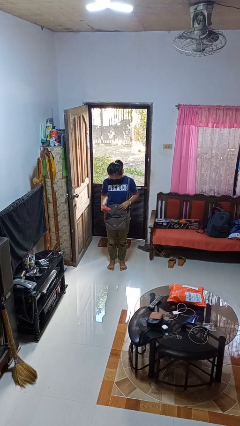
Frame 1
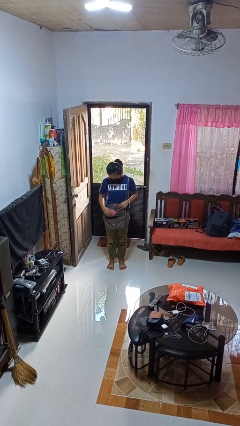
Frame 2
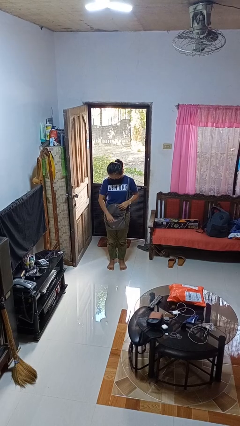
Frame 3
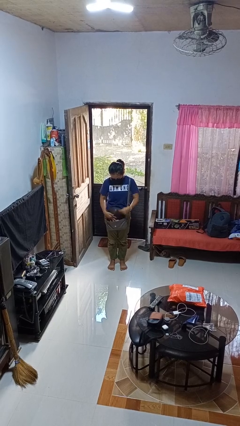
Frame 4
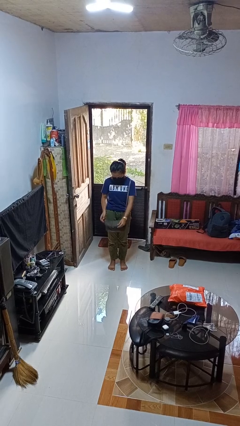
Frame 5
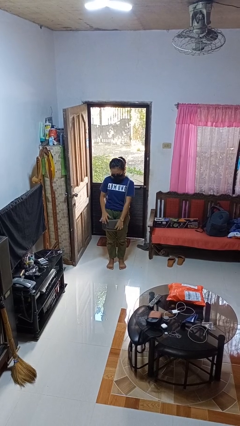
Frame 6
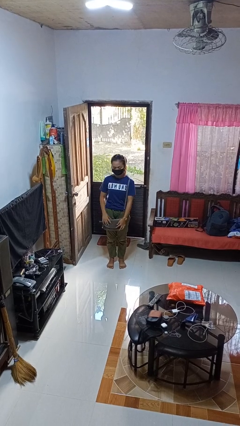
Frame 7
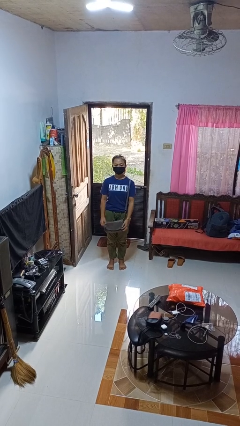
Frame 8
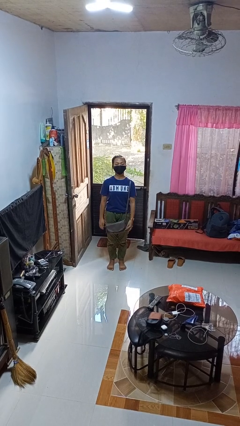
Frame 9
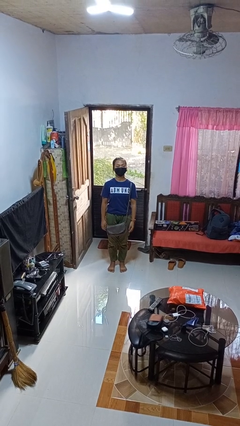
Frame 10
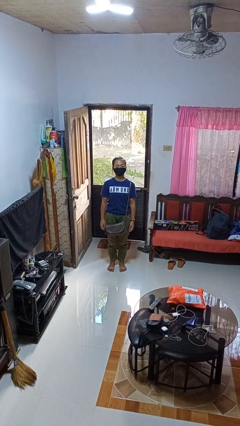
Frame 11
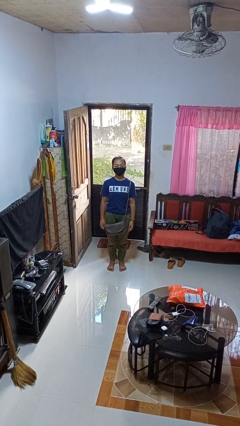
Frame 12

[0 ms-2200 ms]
person puts object into purse

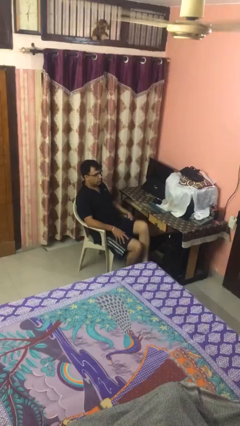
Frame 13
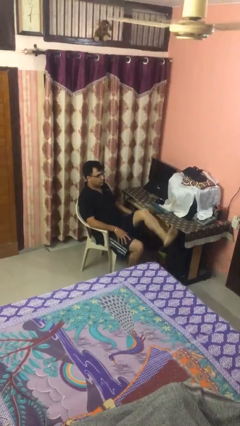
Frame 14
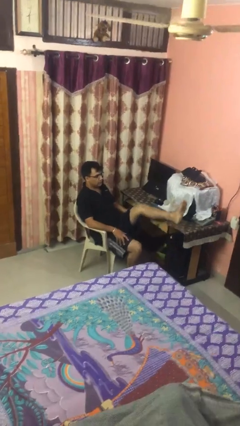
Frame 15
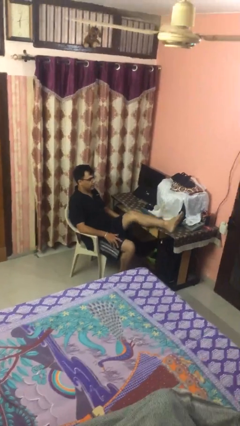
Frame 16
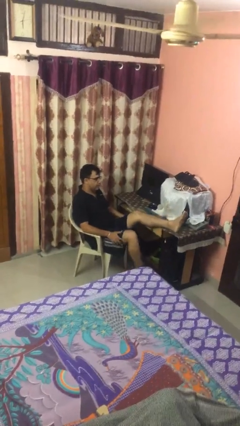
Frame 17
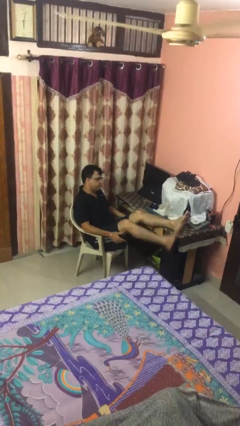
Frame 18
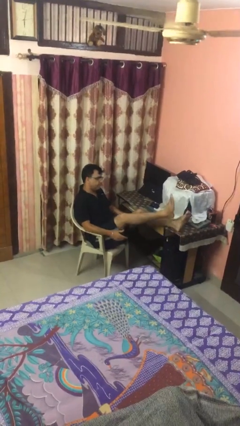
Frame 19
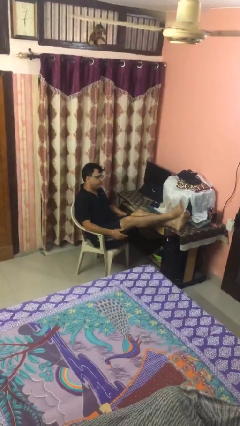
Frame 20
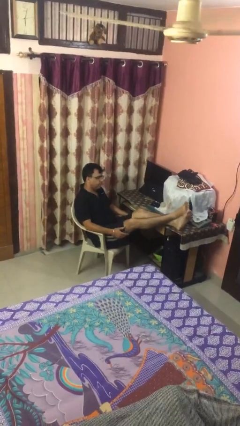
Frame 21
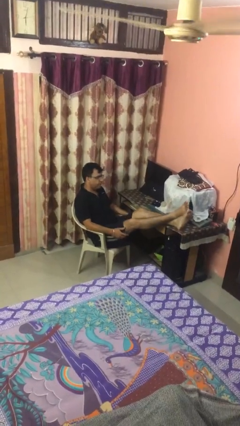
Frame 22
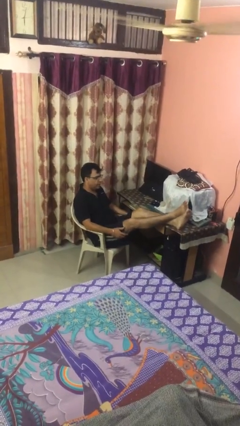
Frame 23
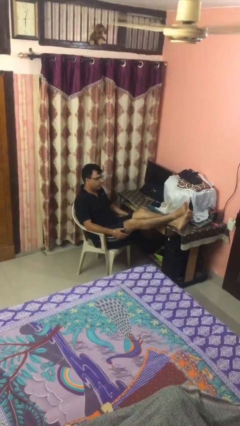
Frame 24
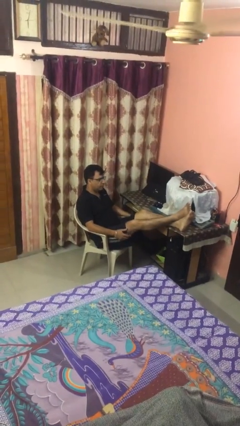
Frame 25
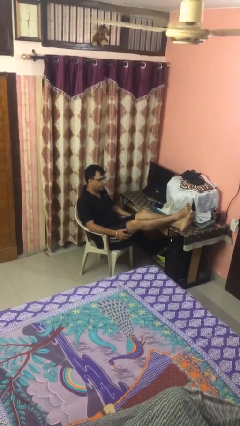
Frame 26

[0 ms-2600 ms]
person puts feet up

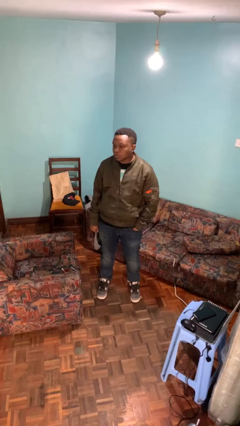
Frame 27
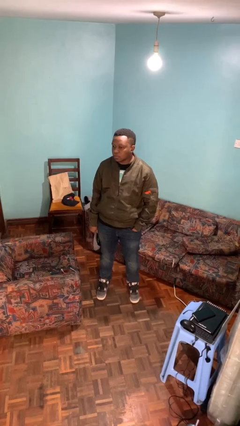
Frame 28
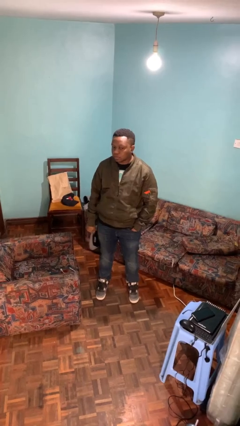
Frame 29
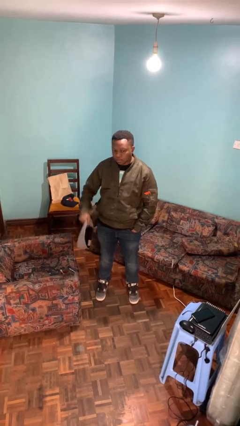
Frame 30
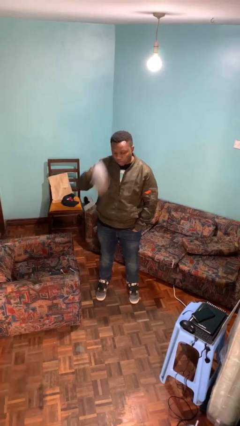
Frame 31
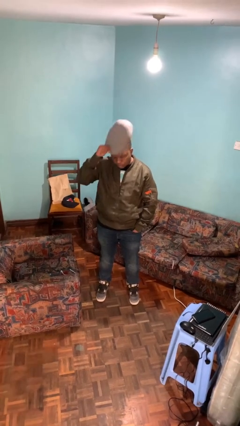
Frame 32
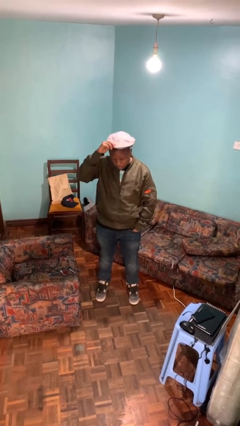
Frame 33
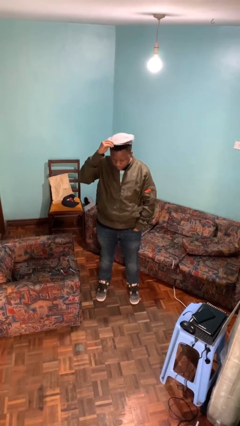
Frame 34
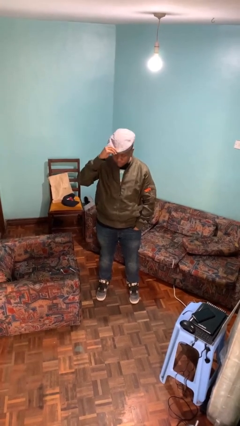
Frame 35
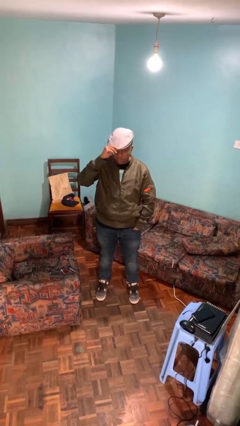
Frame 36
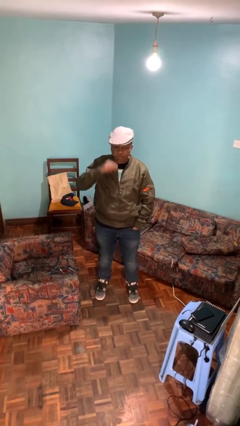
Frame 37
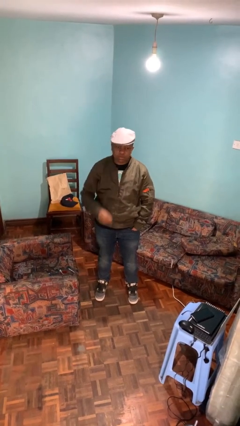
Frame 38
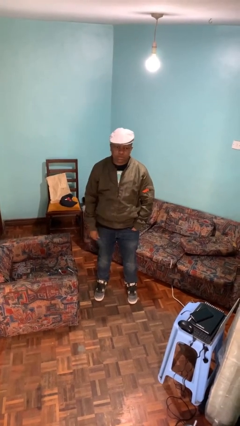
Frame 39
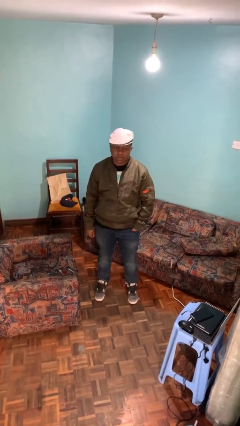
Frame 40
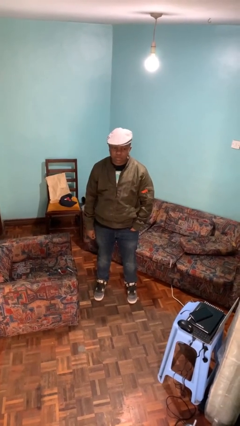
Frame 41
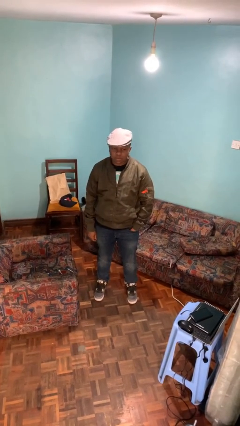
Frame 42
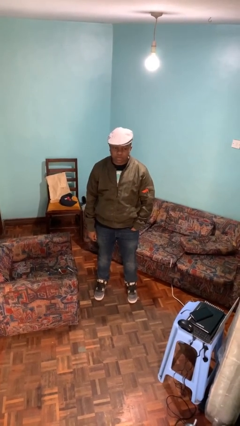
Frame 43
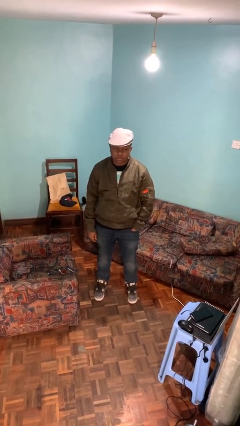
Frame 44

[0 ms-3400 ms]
person puts on hat

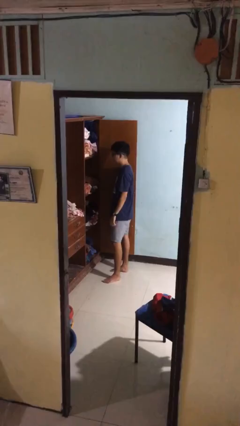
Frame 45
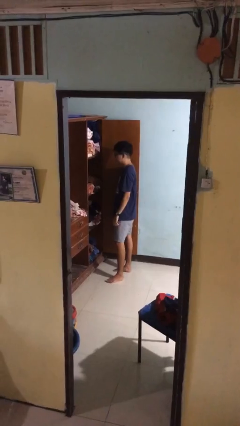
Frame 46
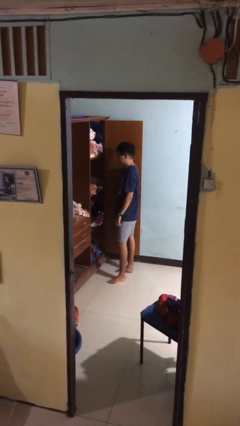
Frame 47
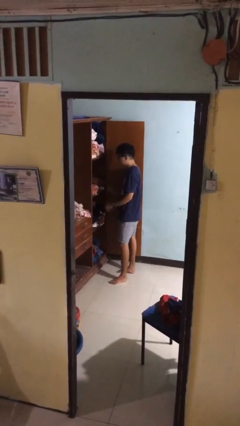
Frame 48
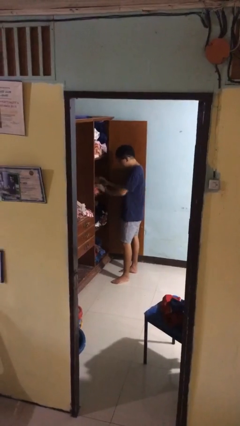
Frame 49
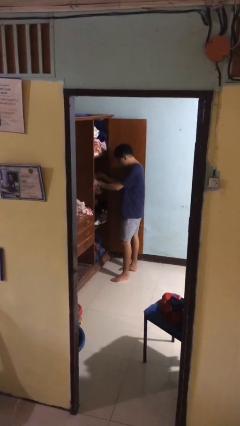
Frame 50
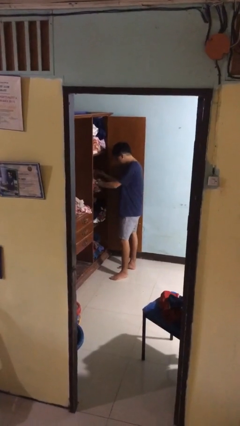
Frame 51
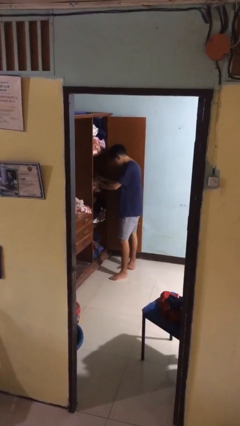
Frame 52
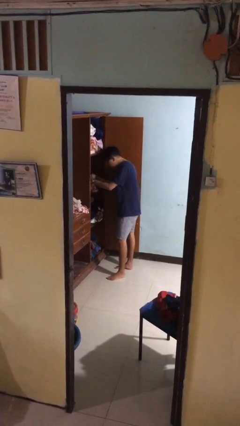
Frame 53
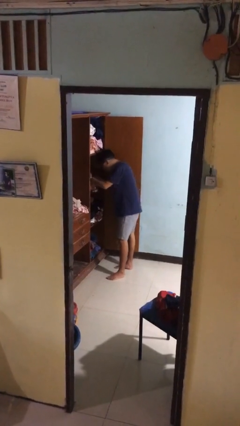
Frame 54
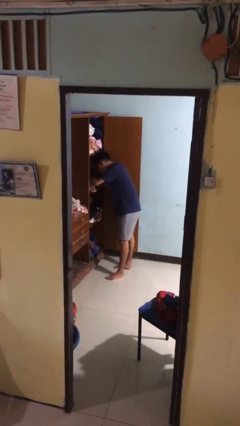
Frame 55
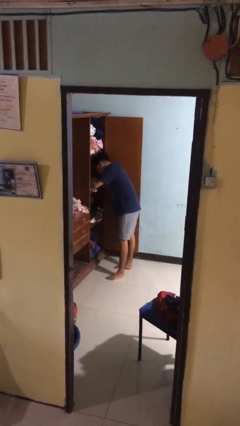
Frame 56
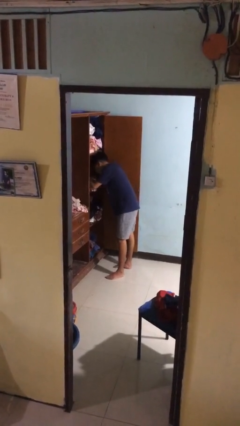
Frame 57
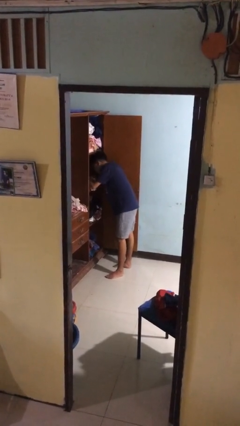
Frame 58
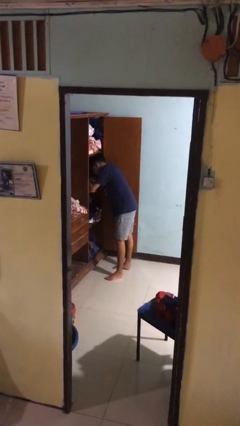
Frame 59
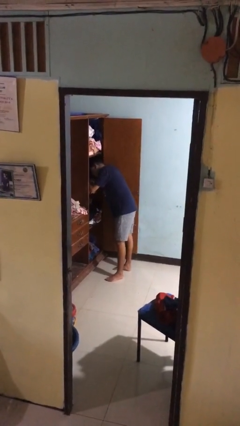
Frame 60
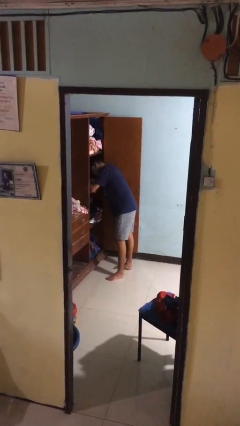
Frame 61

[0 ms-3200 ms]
person searches in cabinet

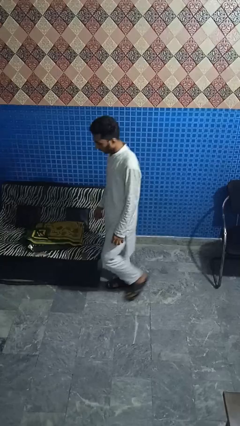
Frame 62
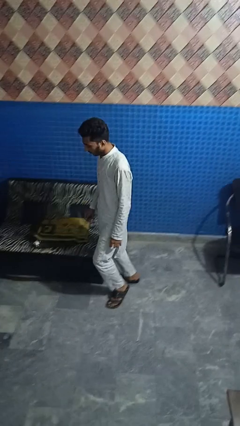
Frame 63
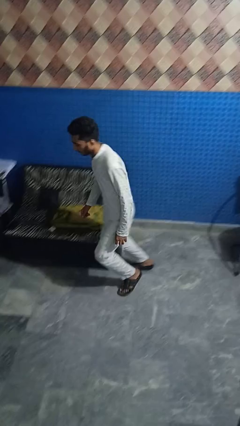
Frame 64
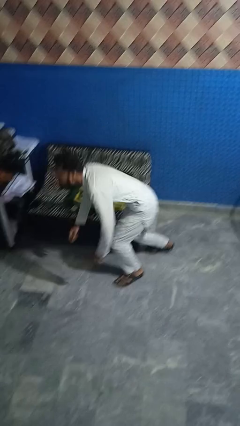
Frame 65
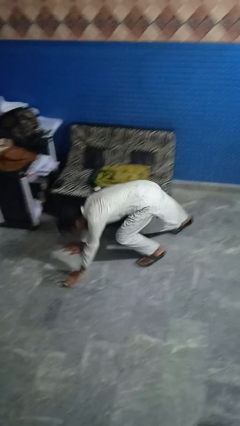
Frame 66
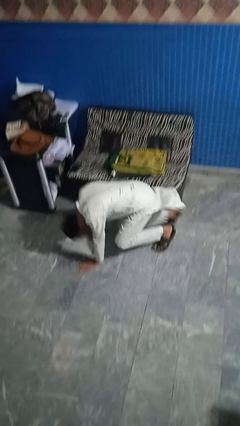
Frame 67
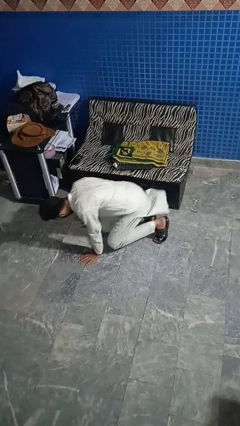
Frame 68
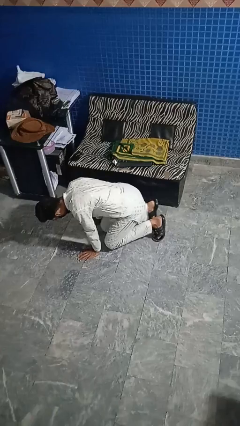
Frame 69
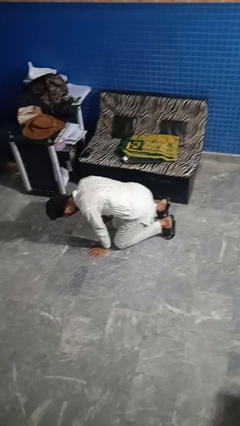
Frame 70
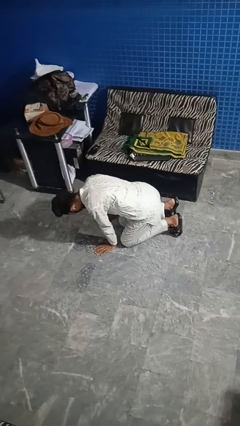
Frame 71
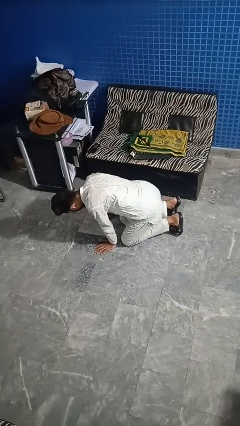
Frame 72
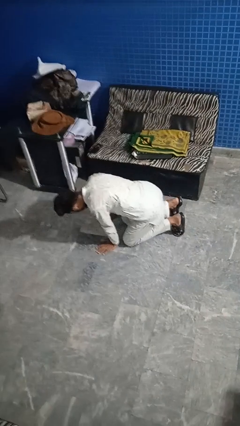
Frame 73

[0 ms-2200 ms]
person trips on object on floor

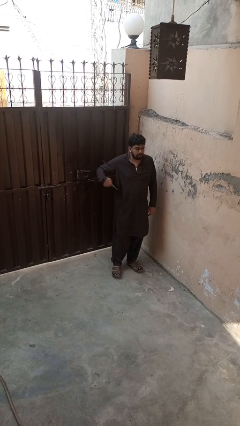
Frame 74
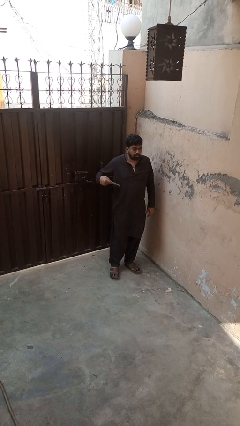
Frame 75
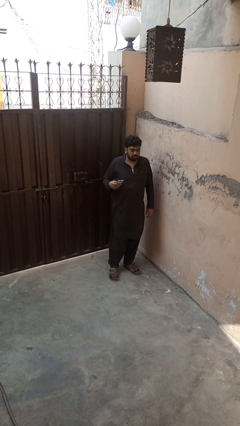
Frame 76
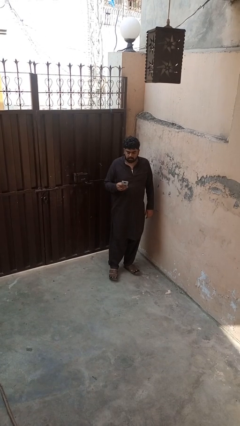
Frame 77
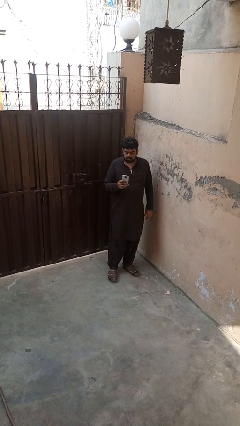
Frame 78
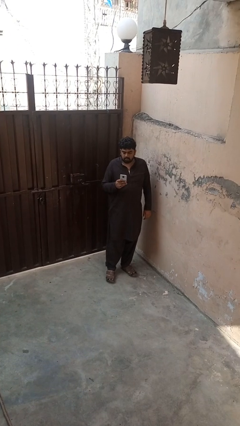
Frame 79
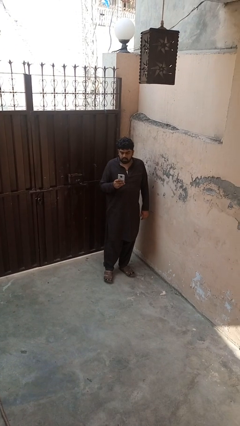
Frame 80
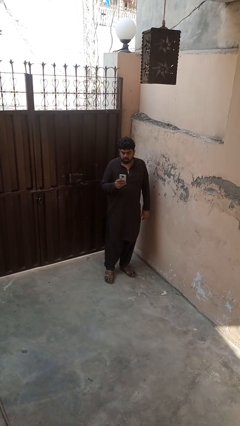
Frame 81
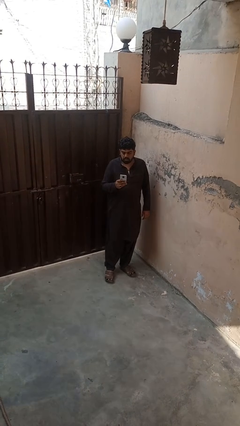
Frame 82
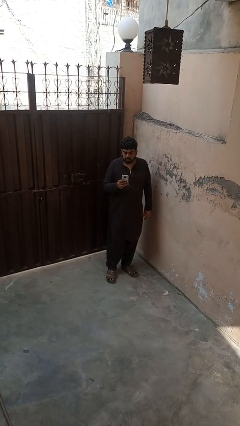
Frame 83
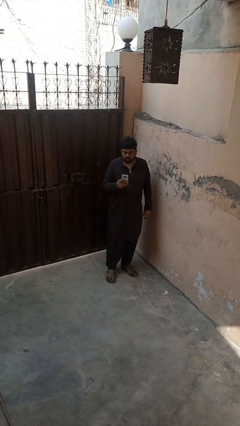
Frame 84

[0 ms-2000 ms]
person takes phone from pocket

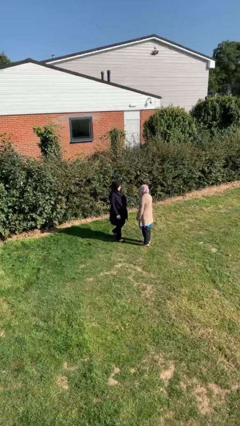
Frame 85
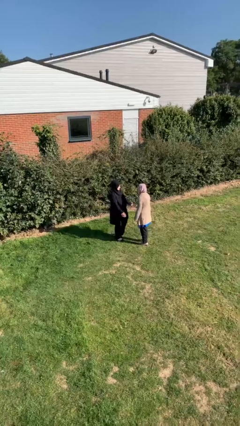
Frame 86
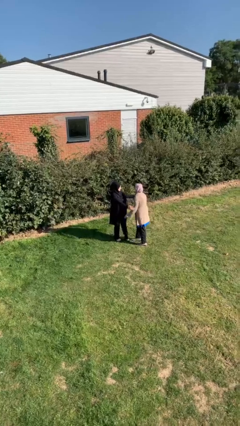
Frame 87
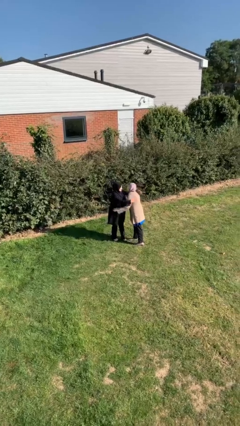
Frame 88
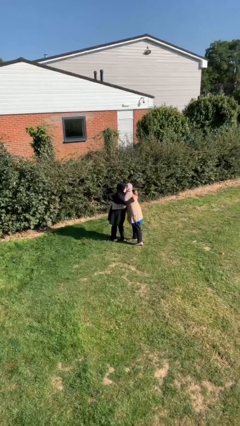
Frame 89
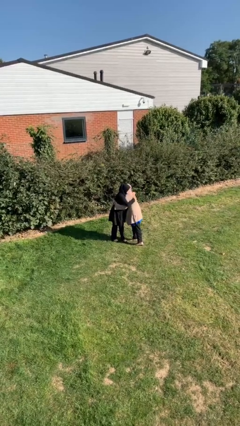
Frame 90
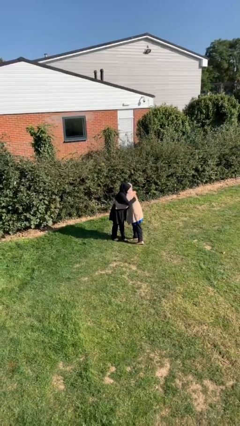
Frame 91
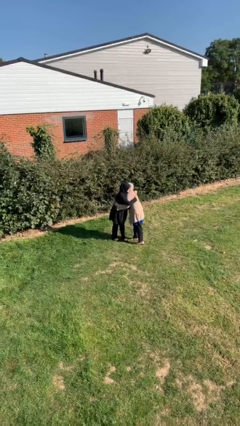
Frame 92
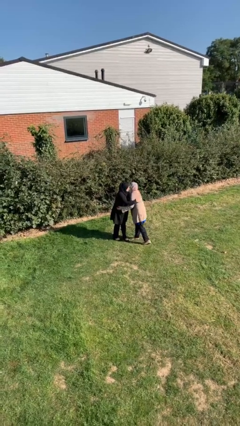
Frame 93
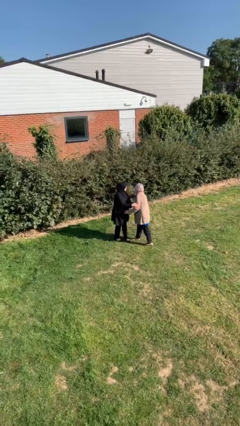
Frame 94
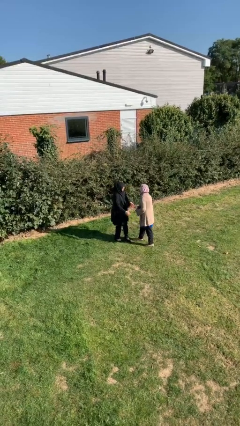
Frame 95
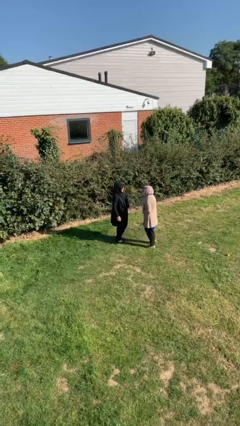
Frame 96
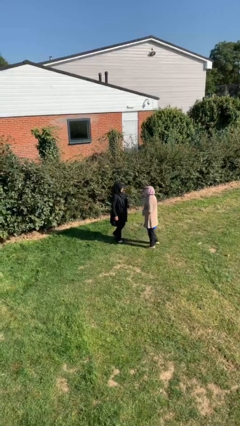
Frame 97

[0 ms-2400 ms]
person embraces person
